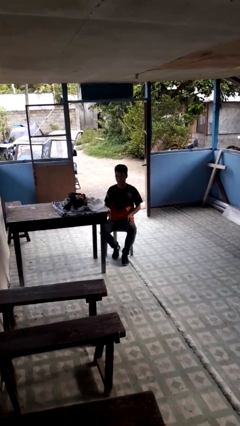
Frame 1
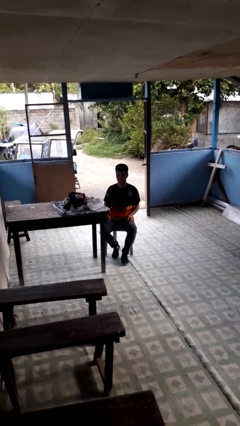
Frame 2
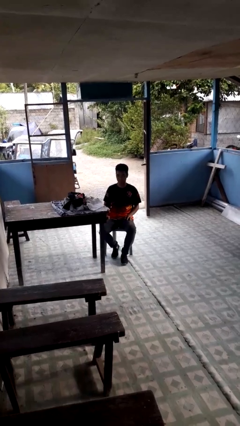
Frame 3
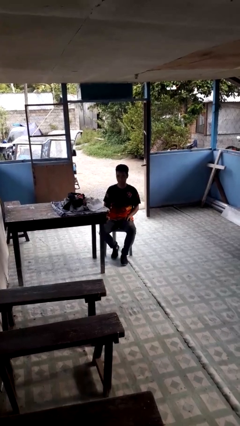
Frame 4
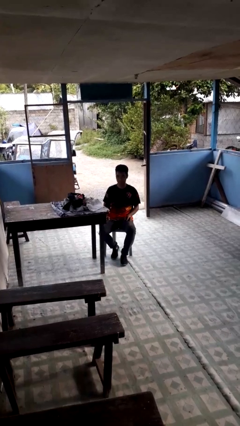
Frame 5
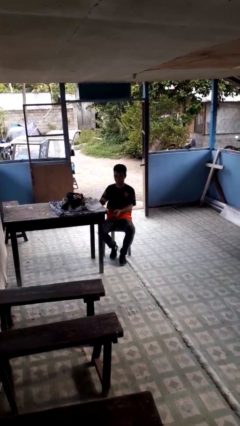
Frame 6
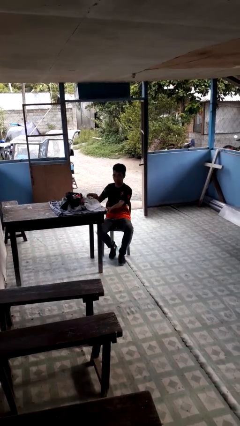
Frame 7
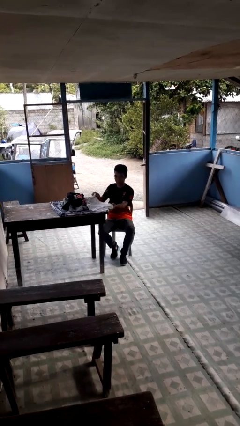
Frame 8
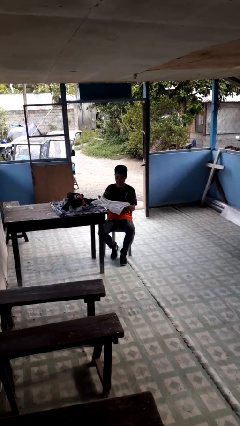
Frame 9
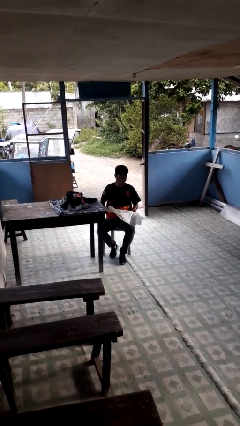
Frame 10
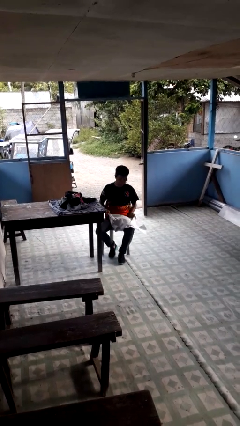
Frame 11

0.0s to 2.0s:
person folds shirt

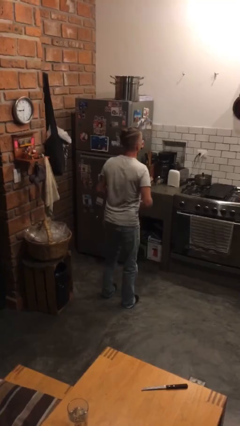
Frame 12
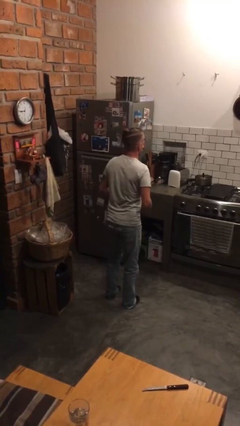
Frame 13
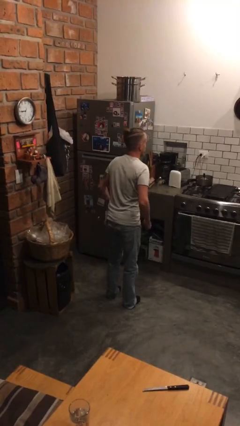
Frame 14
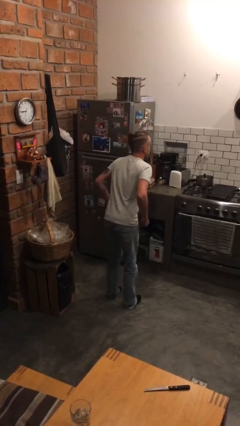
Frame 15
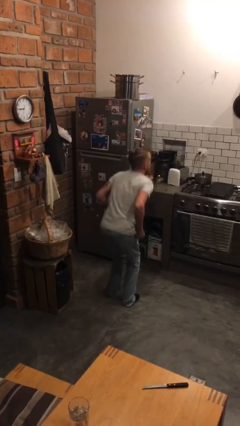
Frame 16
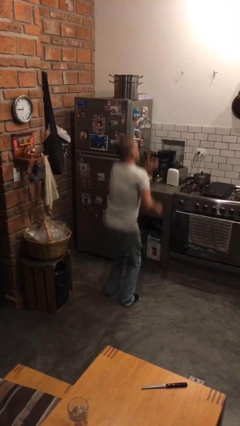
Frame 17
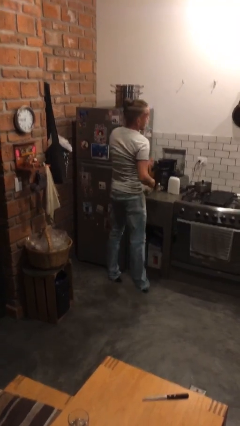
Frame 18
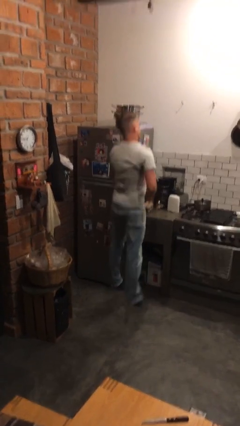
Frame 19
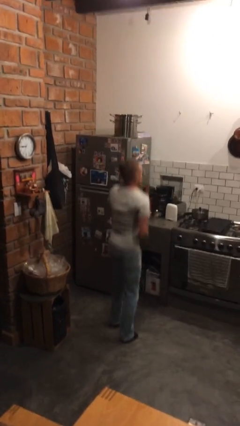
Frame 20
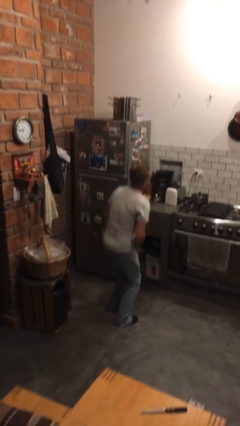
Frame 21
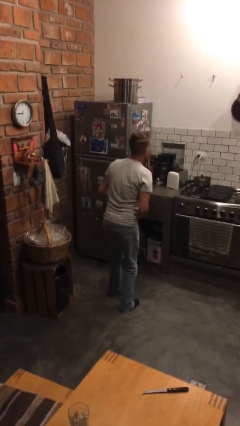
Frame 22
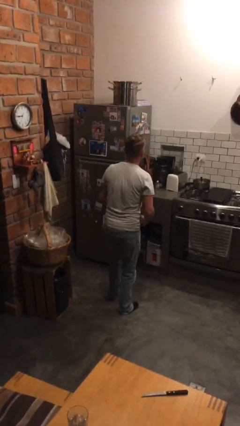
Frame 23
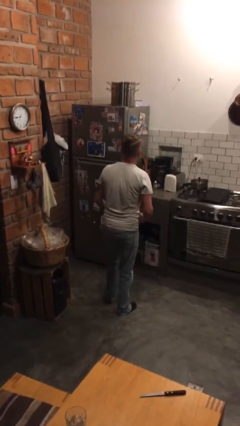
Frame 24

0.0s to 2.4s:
person jumps

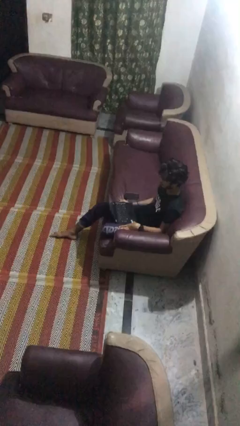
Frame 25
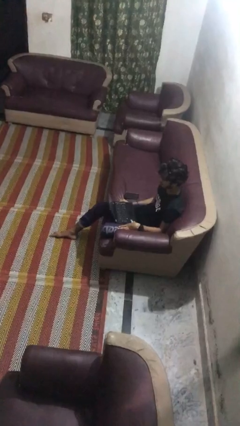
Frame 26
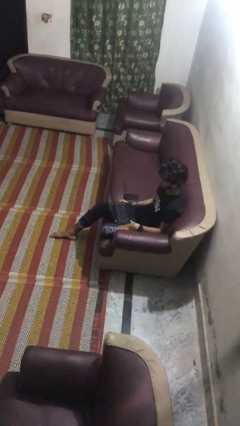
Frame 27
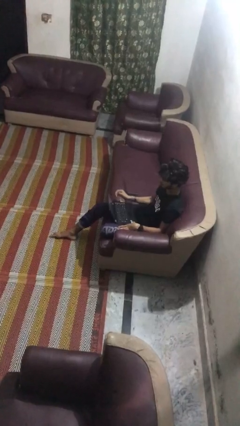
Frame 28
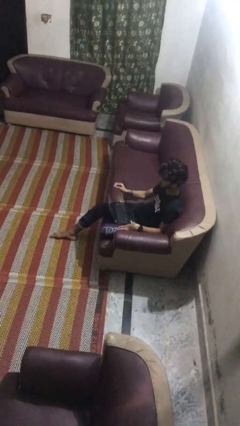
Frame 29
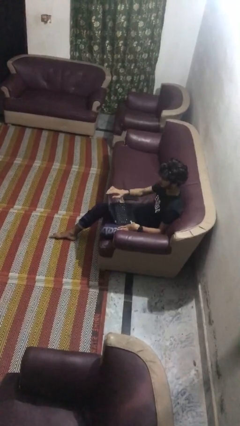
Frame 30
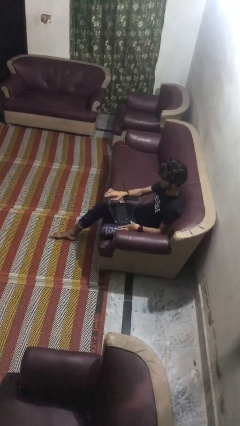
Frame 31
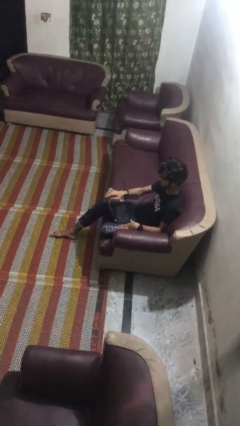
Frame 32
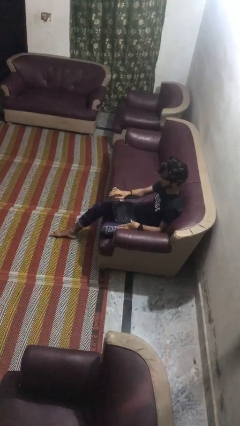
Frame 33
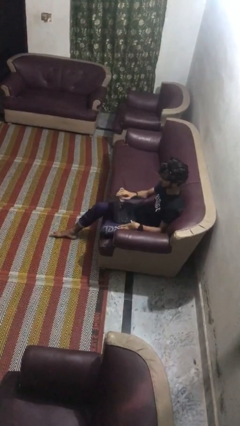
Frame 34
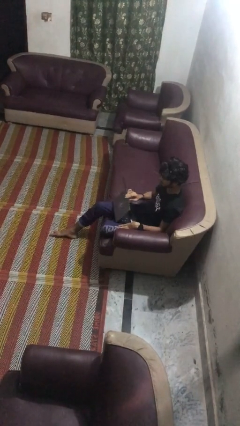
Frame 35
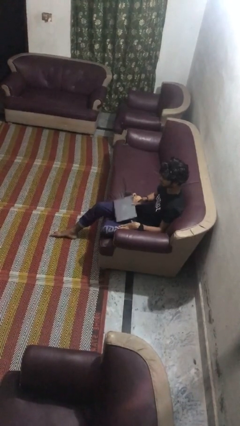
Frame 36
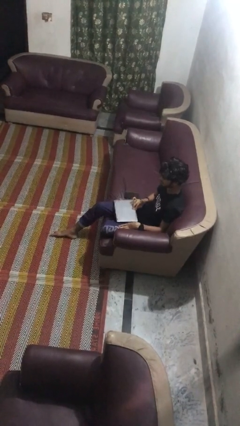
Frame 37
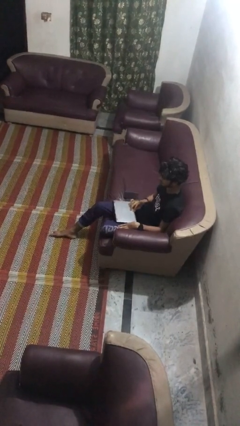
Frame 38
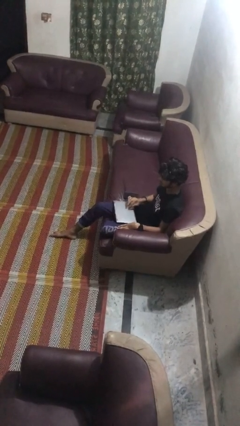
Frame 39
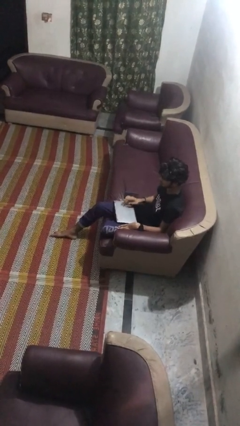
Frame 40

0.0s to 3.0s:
person closes laptop

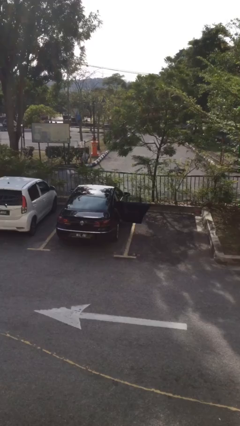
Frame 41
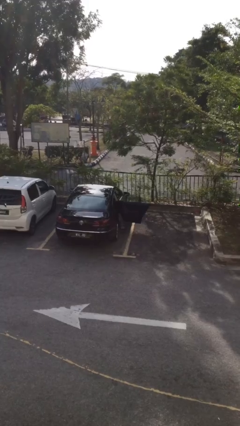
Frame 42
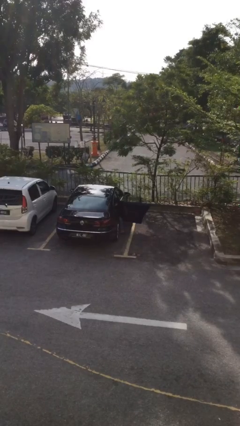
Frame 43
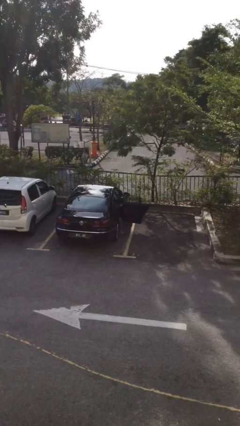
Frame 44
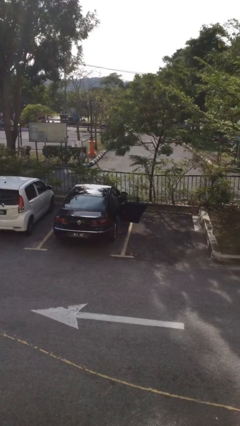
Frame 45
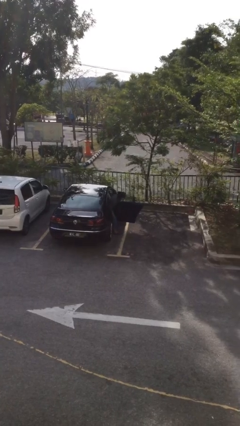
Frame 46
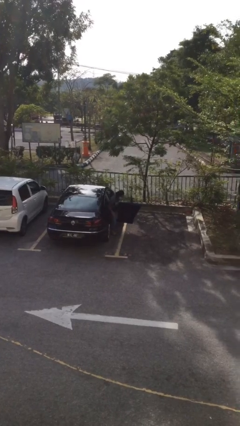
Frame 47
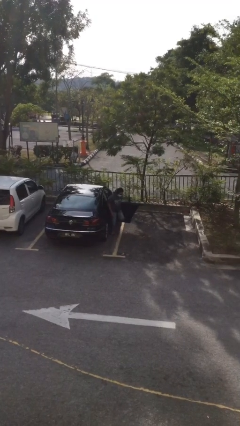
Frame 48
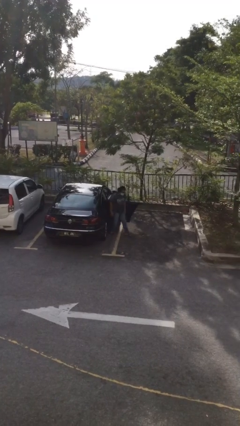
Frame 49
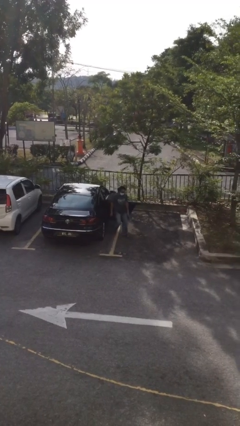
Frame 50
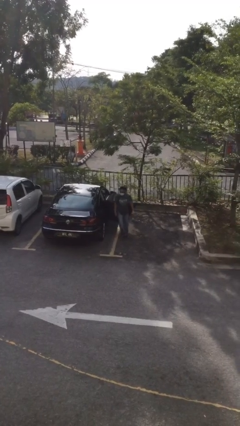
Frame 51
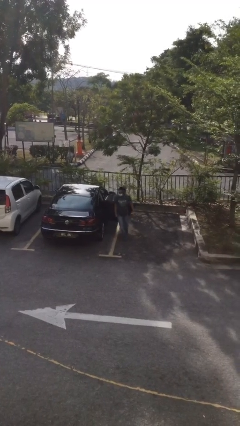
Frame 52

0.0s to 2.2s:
person exits car

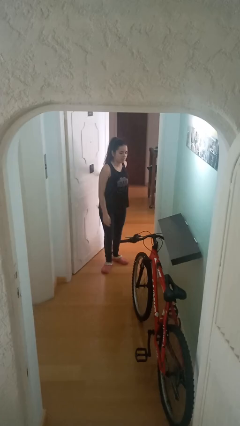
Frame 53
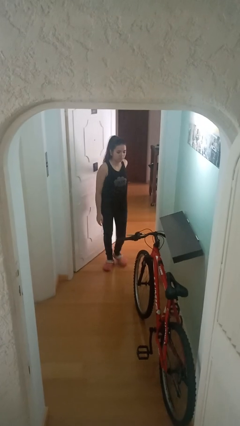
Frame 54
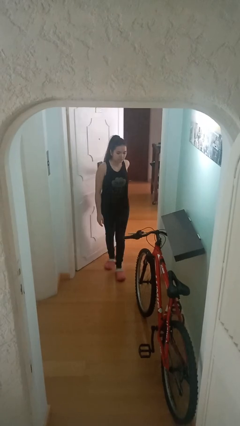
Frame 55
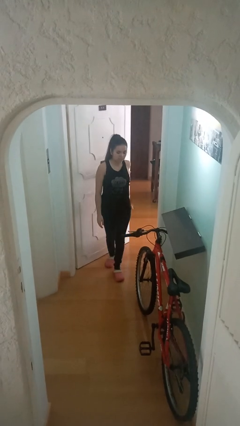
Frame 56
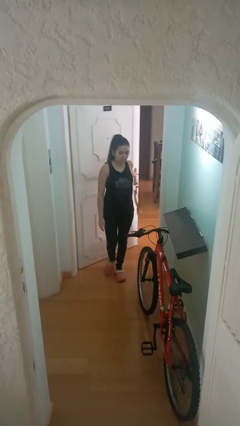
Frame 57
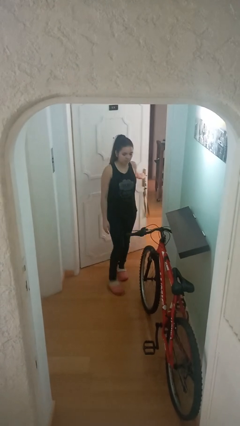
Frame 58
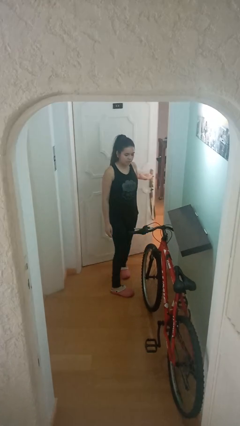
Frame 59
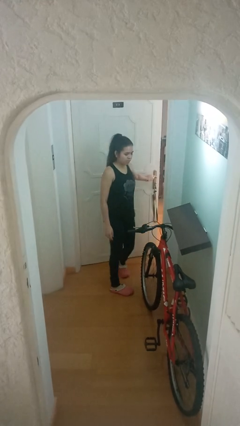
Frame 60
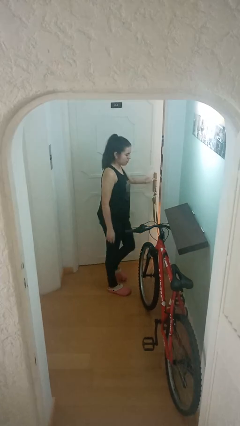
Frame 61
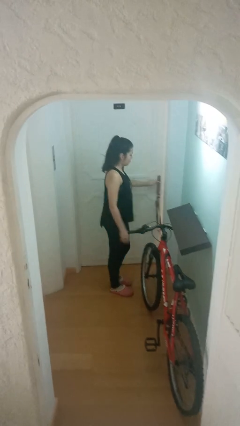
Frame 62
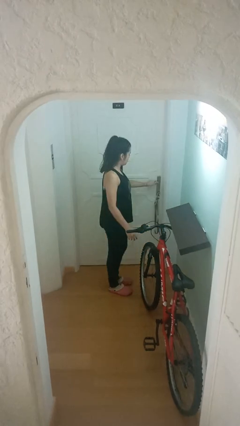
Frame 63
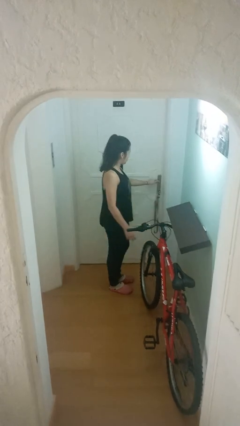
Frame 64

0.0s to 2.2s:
person closes facility door

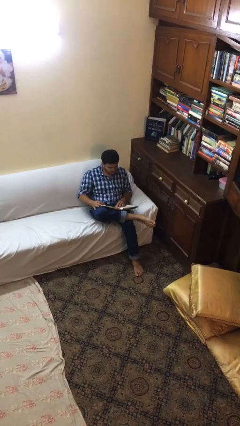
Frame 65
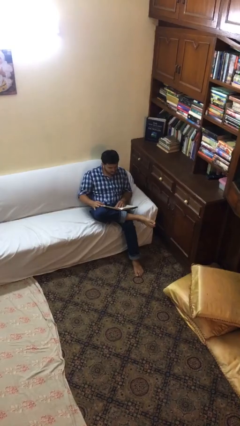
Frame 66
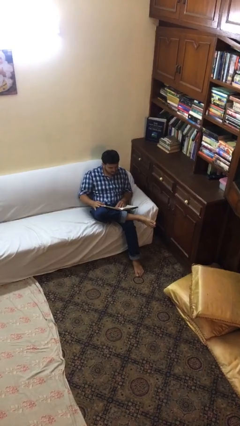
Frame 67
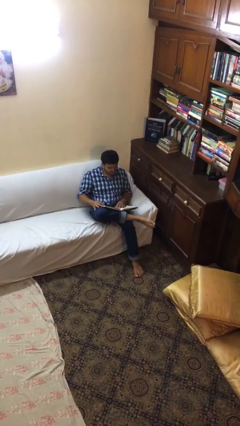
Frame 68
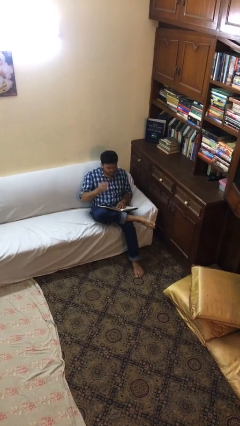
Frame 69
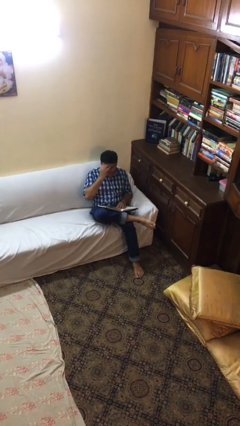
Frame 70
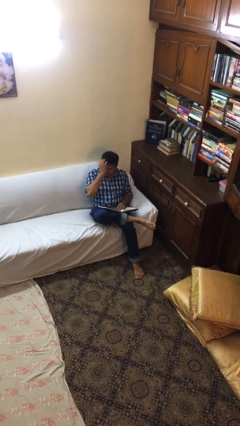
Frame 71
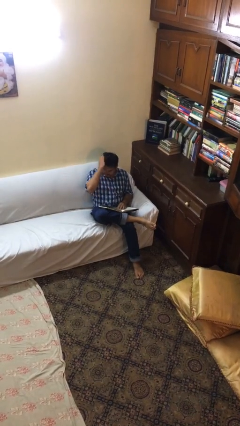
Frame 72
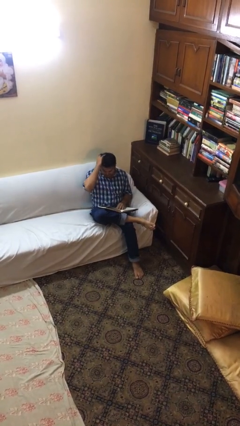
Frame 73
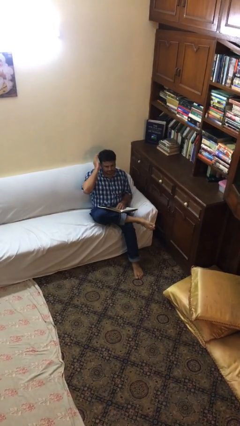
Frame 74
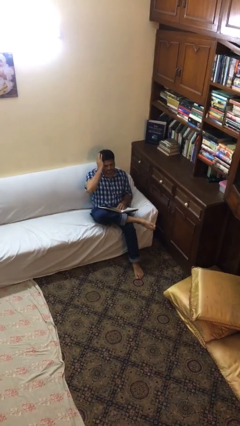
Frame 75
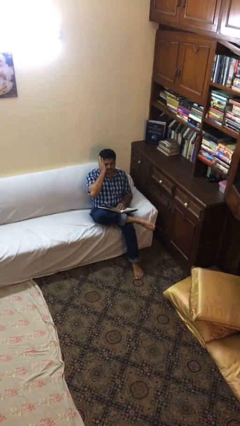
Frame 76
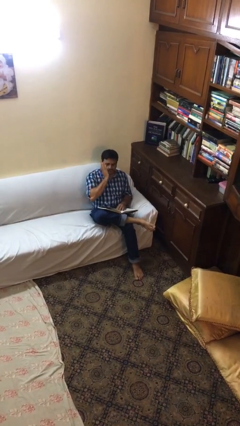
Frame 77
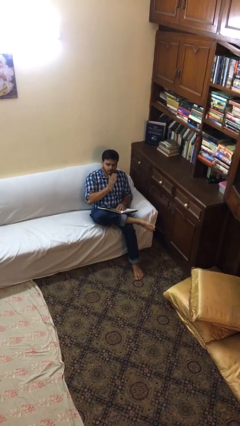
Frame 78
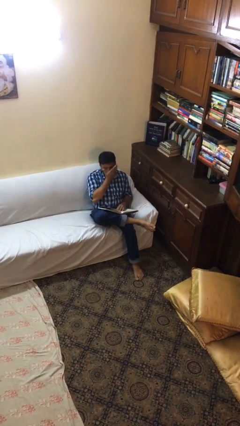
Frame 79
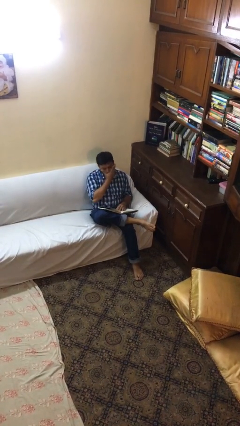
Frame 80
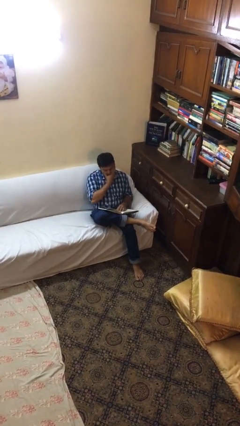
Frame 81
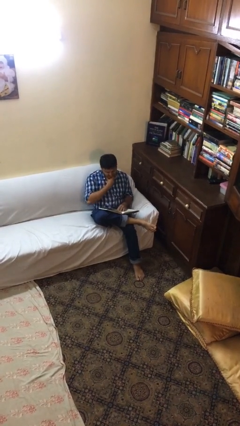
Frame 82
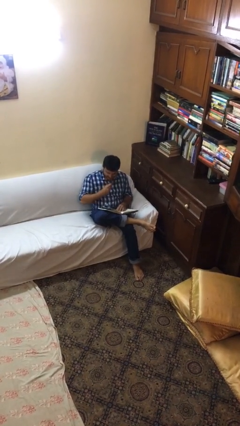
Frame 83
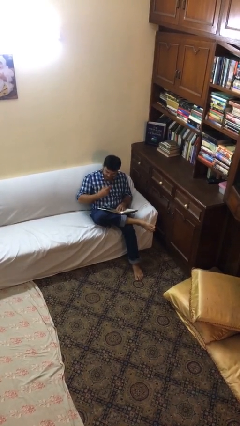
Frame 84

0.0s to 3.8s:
person reads document

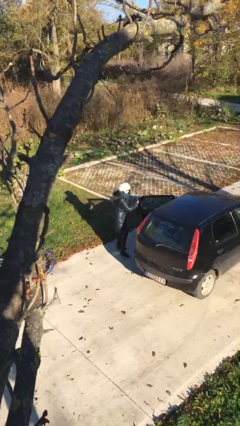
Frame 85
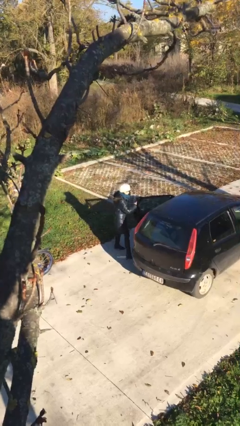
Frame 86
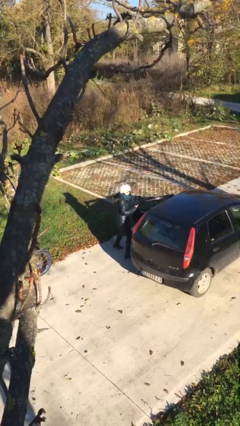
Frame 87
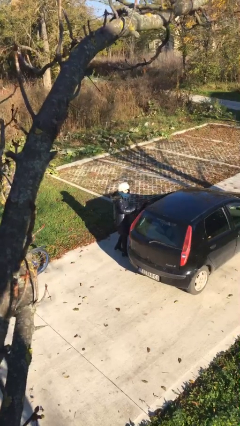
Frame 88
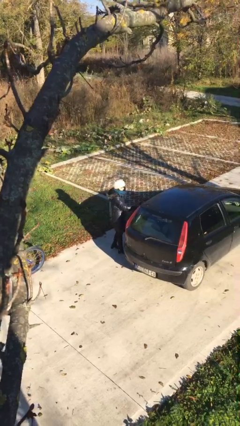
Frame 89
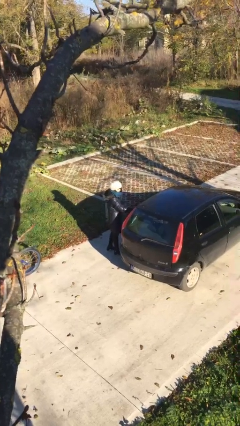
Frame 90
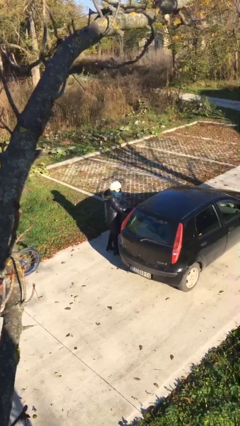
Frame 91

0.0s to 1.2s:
person closes car door

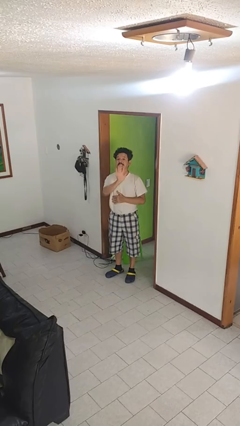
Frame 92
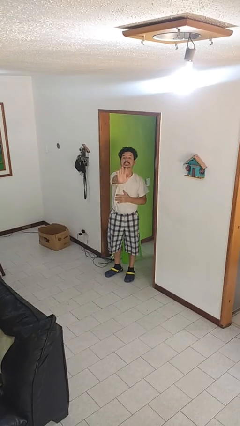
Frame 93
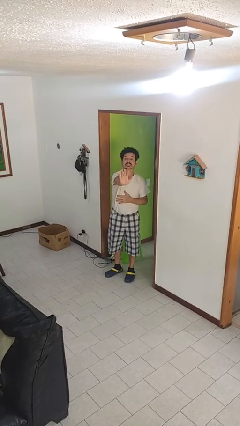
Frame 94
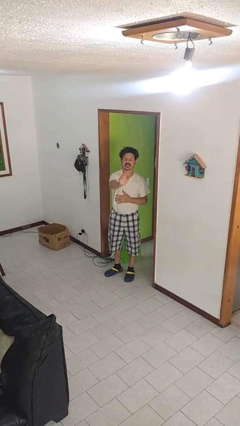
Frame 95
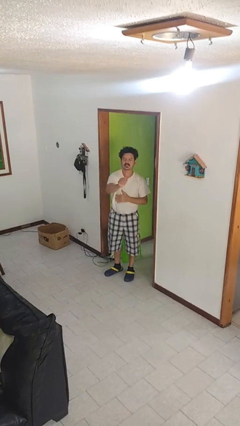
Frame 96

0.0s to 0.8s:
person gestures stop
